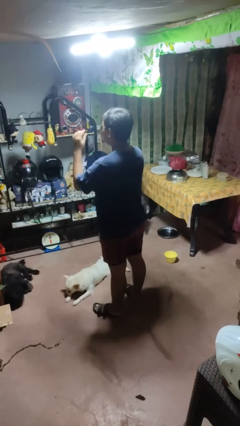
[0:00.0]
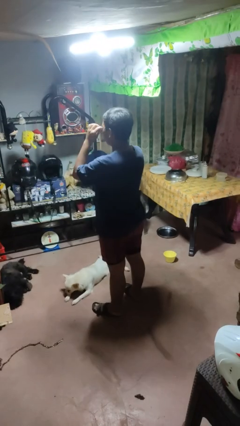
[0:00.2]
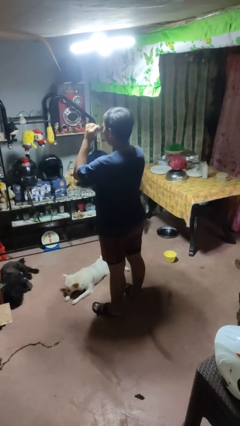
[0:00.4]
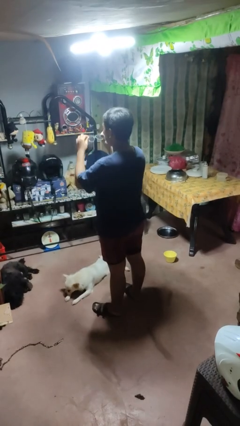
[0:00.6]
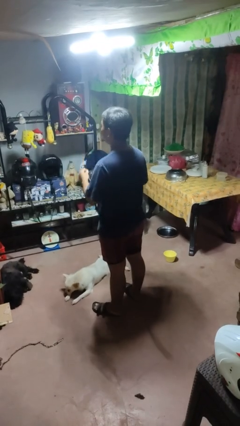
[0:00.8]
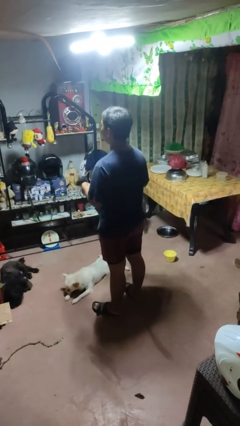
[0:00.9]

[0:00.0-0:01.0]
person takes off sunglasses

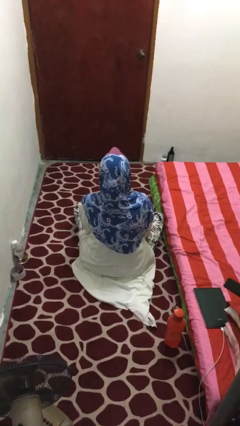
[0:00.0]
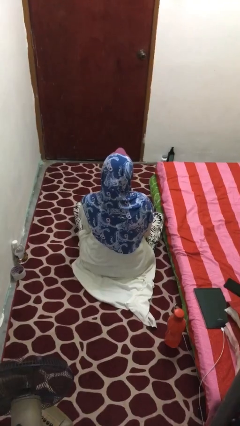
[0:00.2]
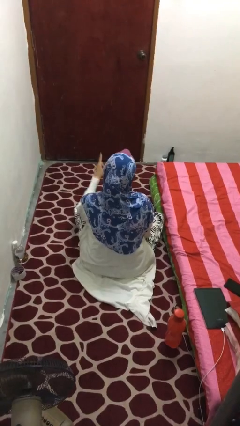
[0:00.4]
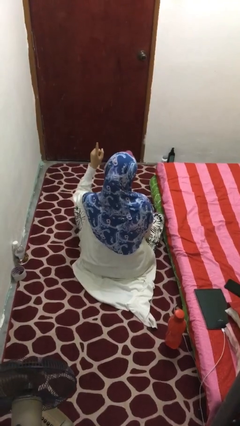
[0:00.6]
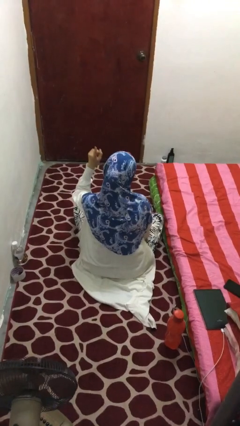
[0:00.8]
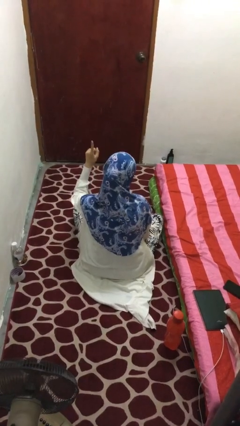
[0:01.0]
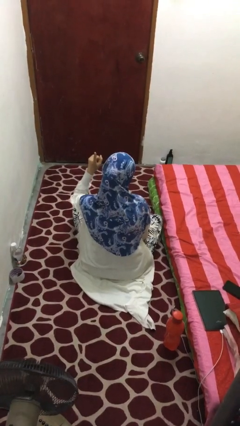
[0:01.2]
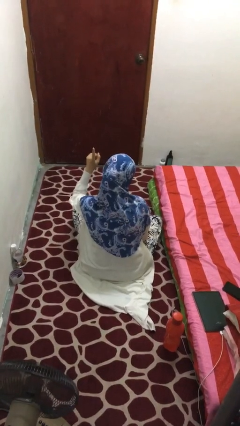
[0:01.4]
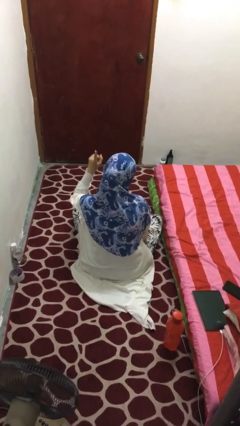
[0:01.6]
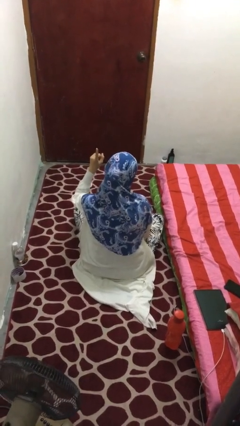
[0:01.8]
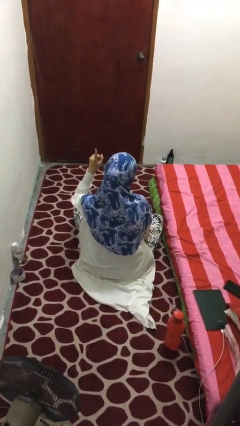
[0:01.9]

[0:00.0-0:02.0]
person gestures number one

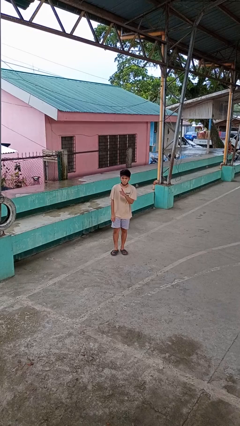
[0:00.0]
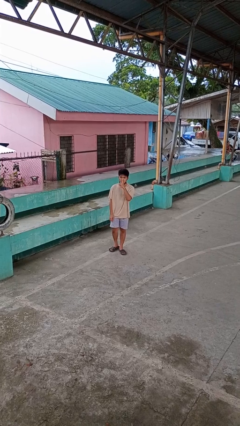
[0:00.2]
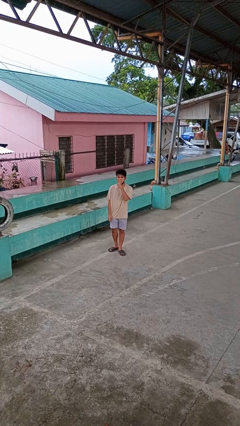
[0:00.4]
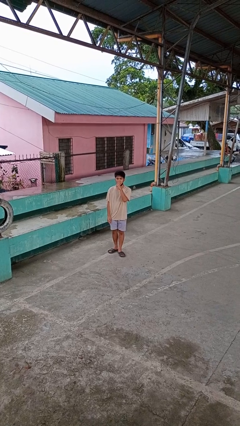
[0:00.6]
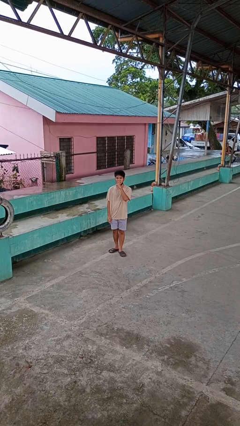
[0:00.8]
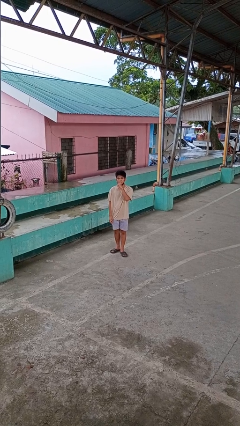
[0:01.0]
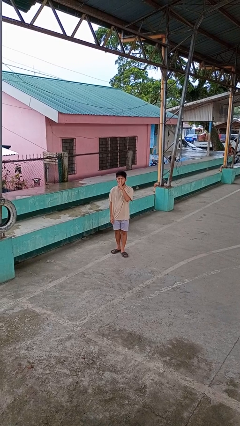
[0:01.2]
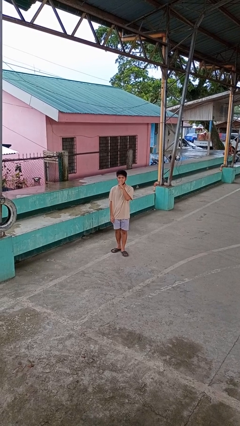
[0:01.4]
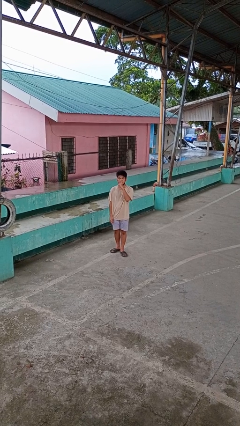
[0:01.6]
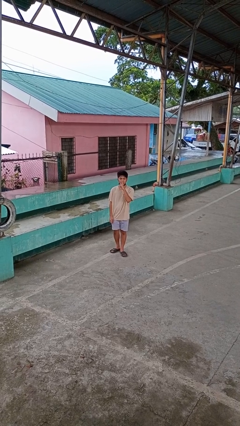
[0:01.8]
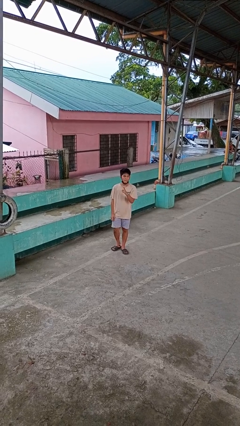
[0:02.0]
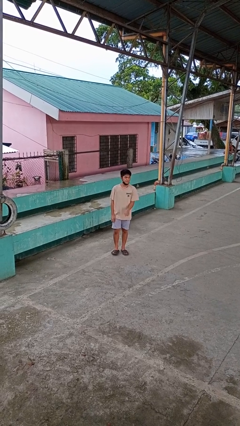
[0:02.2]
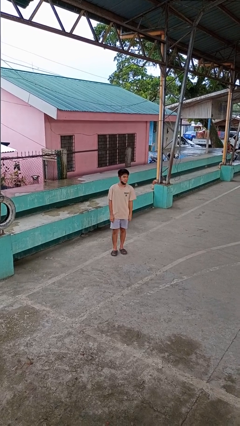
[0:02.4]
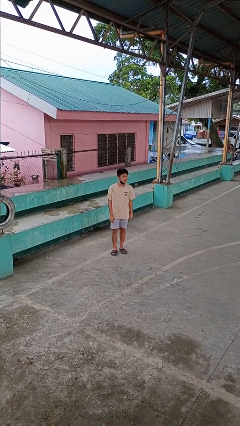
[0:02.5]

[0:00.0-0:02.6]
person gestures be quiet

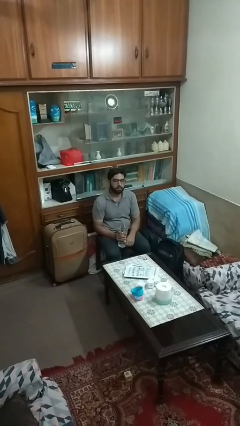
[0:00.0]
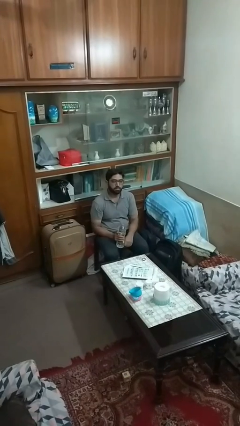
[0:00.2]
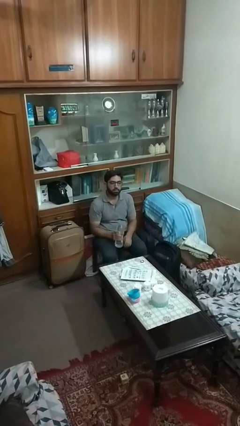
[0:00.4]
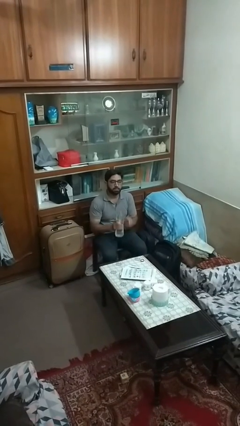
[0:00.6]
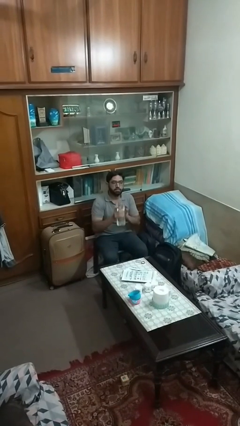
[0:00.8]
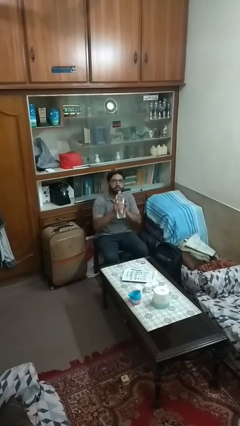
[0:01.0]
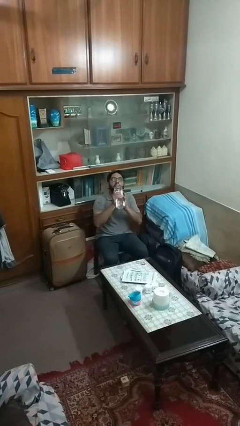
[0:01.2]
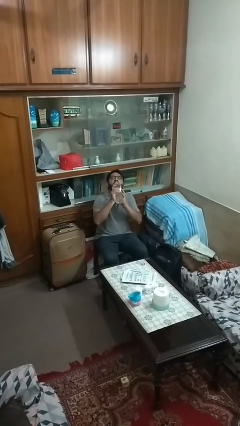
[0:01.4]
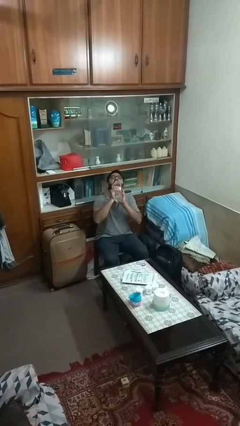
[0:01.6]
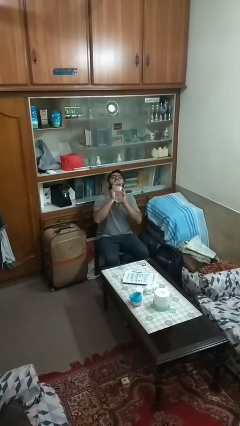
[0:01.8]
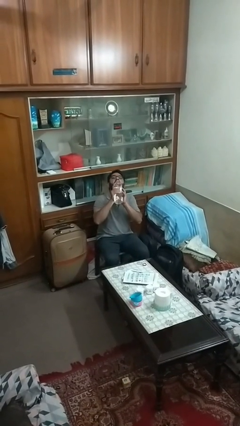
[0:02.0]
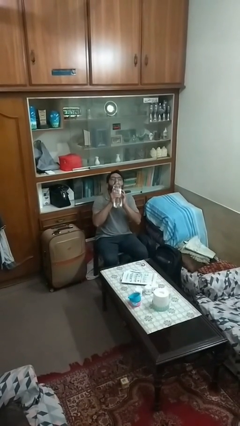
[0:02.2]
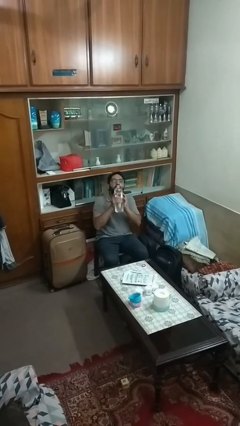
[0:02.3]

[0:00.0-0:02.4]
person drinks from bottle

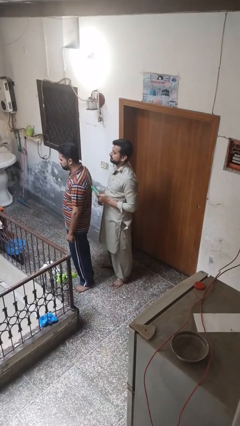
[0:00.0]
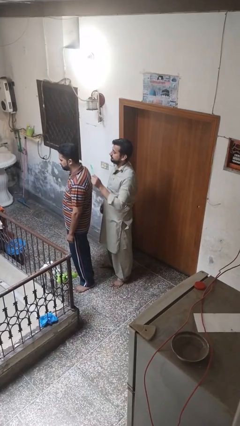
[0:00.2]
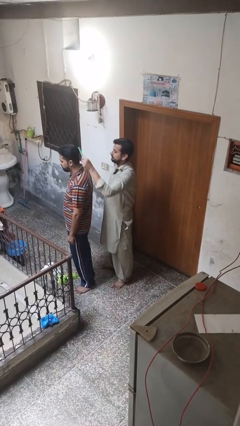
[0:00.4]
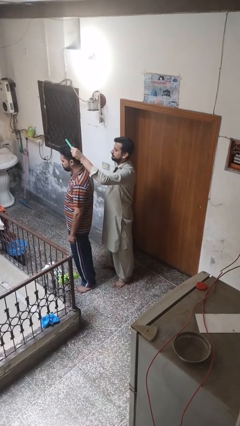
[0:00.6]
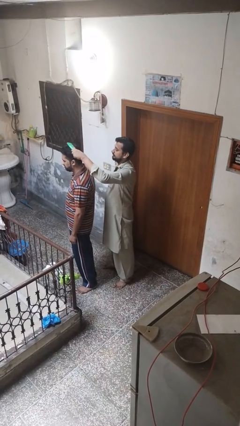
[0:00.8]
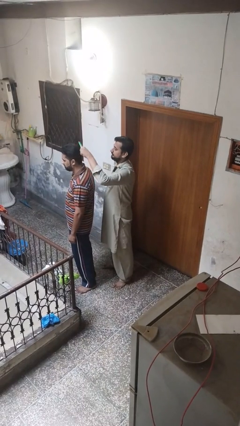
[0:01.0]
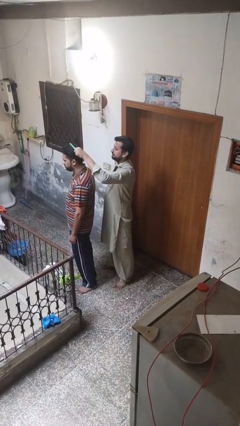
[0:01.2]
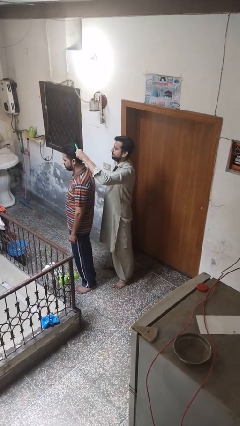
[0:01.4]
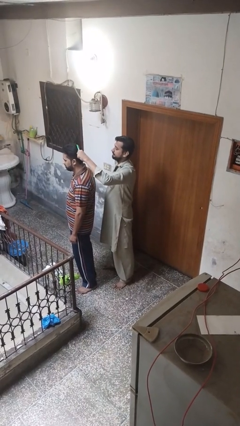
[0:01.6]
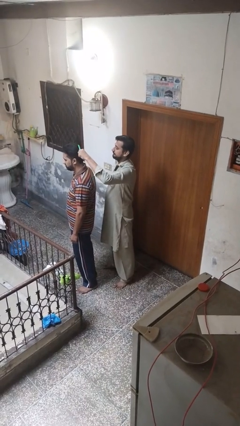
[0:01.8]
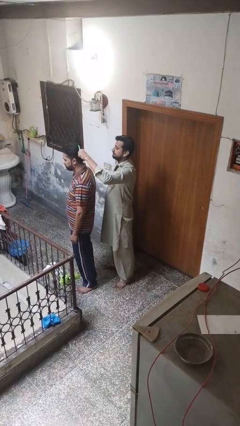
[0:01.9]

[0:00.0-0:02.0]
person brushes hair of person

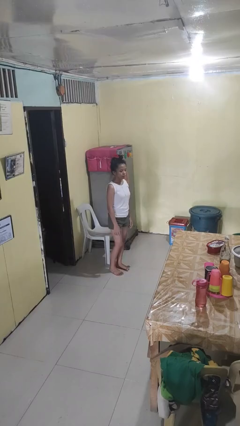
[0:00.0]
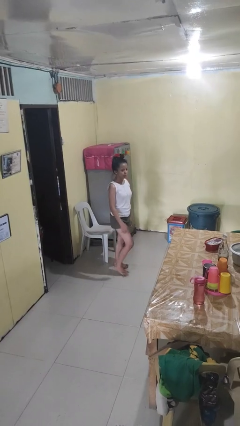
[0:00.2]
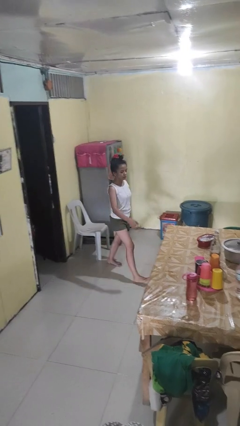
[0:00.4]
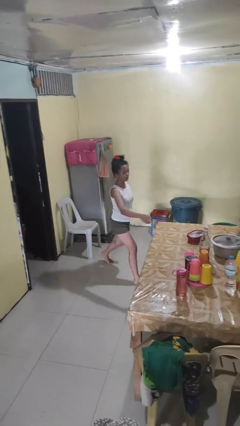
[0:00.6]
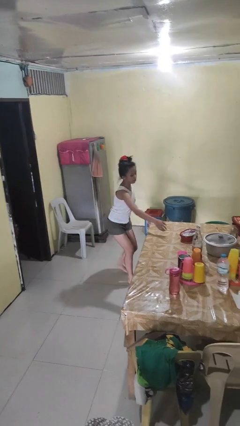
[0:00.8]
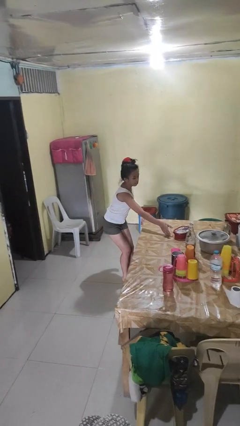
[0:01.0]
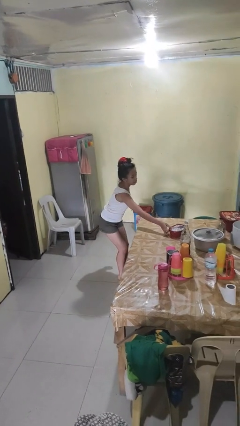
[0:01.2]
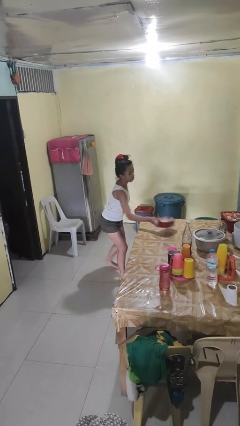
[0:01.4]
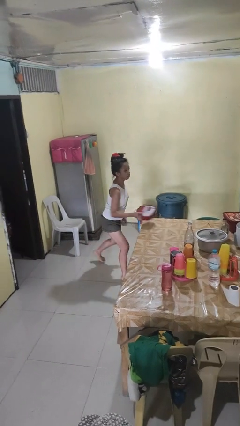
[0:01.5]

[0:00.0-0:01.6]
person picks up object from table

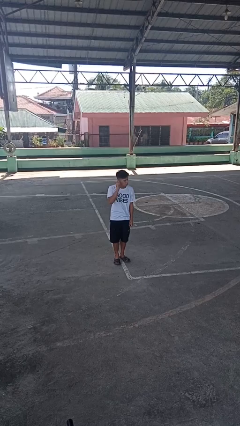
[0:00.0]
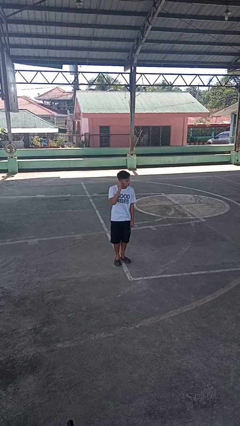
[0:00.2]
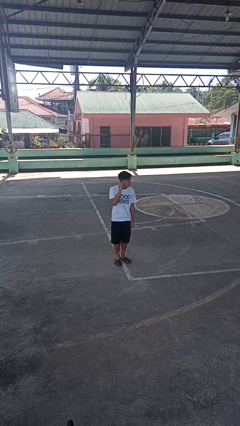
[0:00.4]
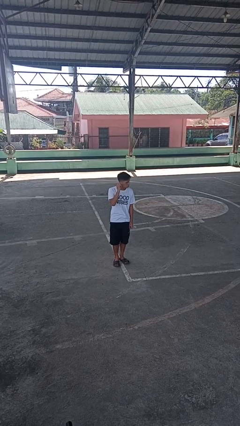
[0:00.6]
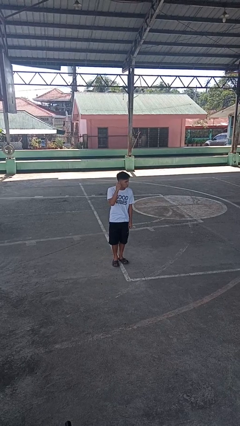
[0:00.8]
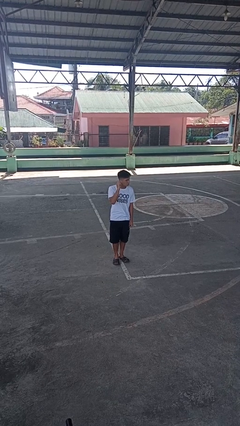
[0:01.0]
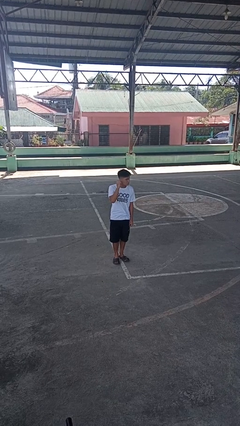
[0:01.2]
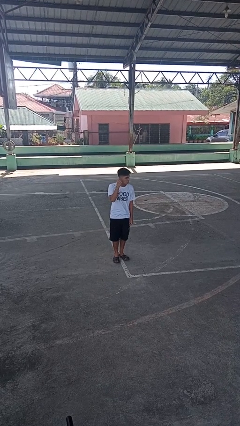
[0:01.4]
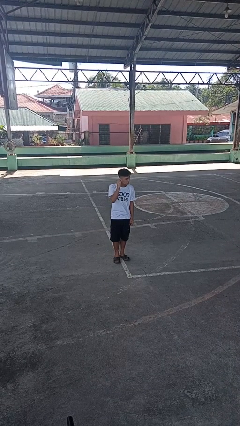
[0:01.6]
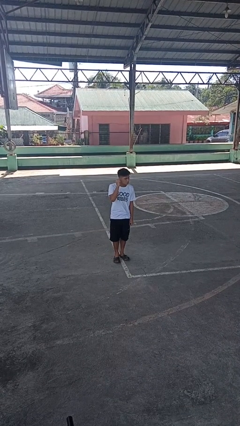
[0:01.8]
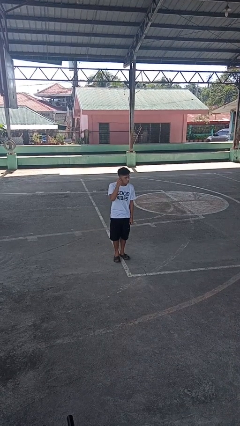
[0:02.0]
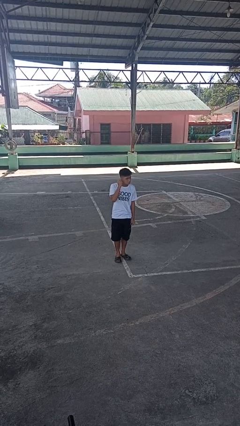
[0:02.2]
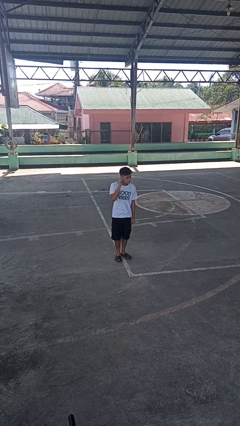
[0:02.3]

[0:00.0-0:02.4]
person touches earlobe

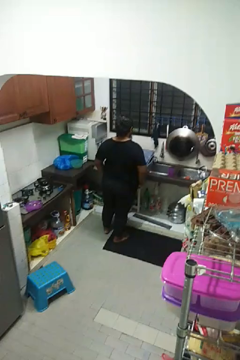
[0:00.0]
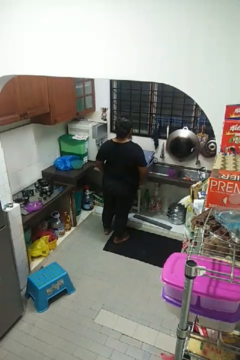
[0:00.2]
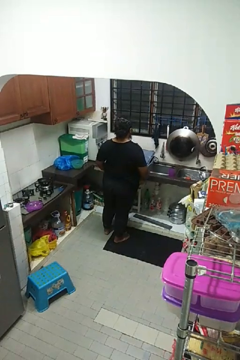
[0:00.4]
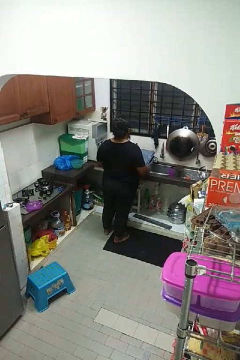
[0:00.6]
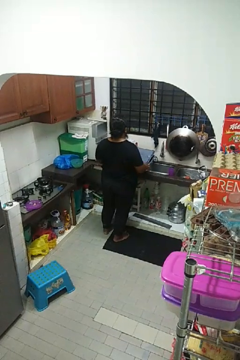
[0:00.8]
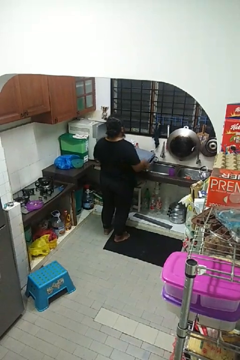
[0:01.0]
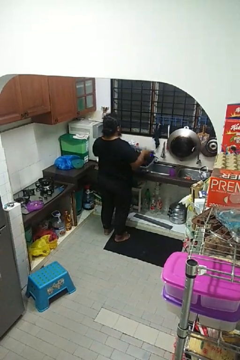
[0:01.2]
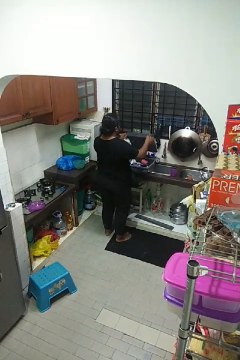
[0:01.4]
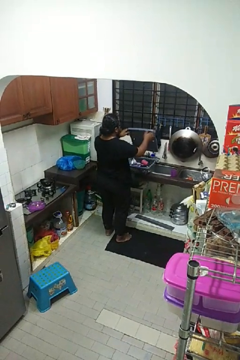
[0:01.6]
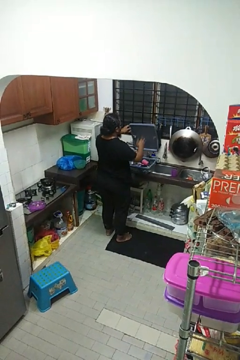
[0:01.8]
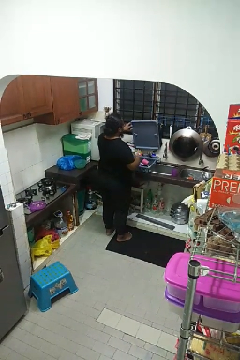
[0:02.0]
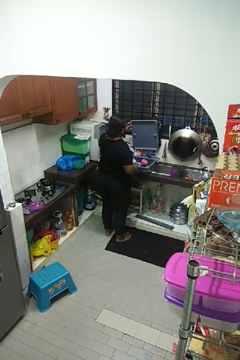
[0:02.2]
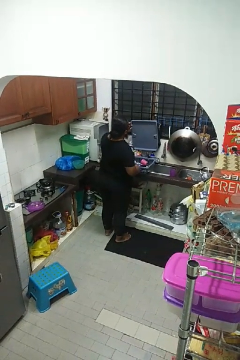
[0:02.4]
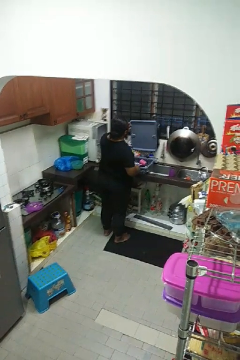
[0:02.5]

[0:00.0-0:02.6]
person opens dishwasher

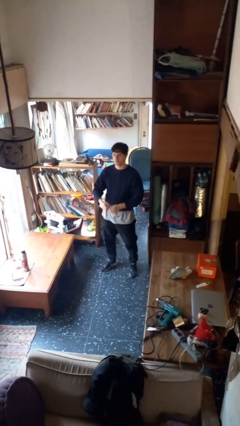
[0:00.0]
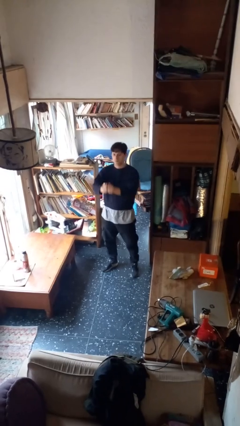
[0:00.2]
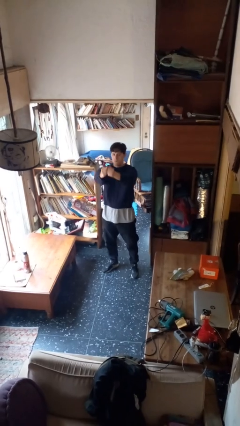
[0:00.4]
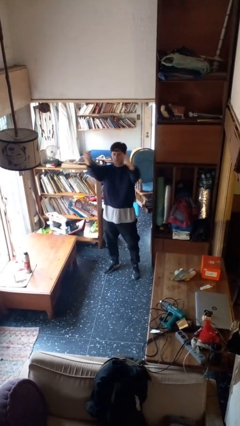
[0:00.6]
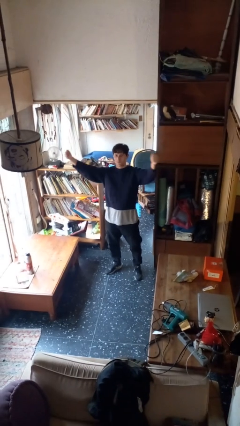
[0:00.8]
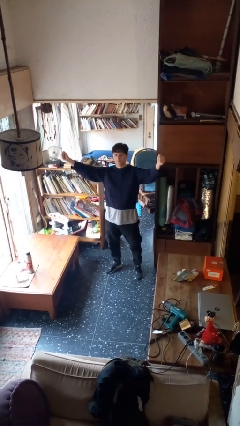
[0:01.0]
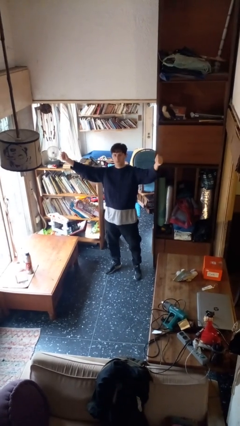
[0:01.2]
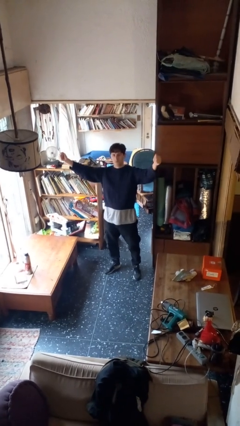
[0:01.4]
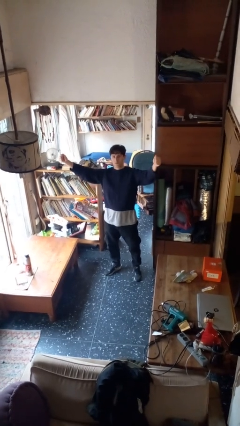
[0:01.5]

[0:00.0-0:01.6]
person gestures zoom in
